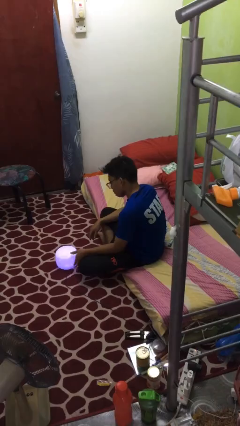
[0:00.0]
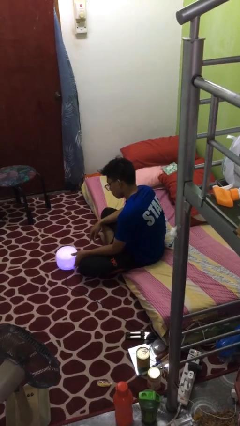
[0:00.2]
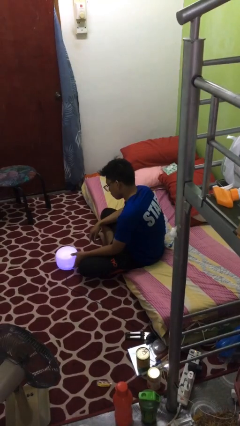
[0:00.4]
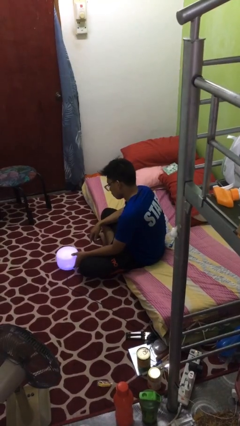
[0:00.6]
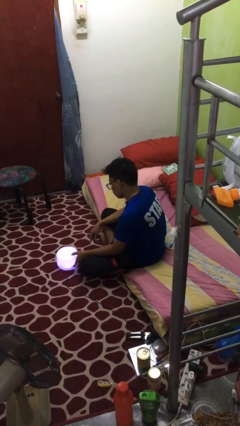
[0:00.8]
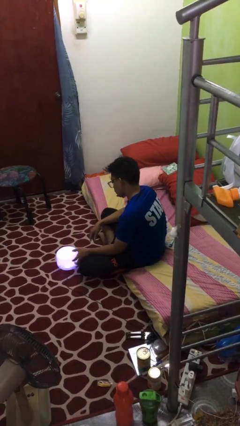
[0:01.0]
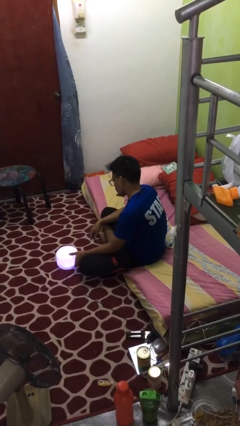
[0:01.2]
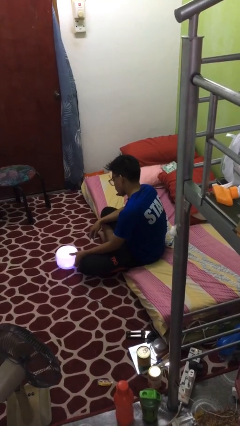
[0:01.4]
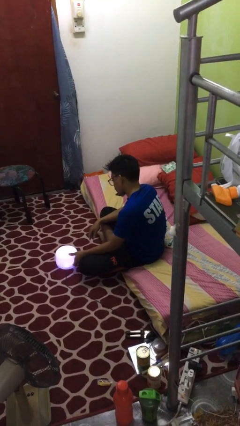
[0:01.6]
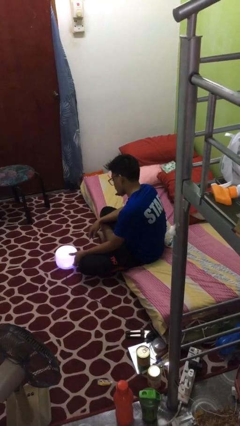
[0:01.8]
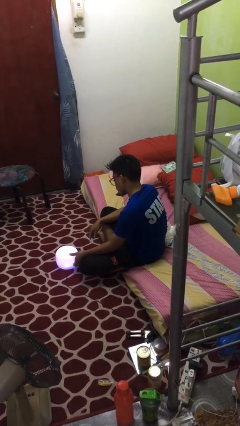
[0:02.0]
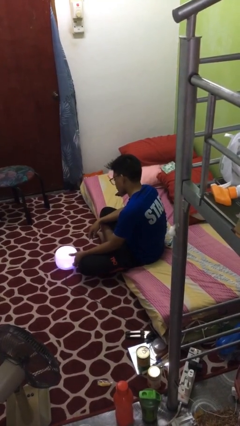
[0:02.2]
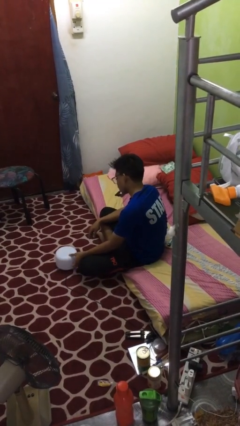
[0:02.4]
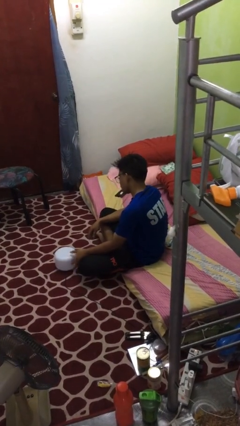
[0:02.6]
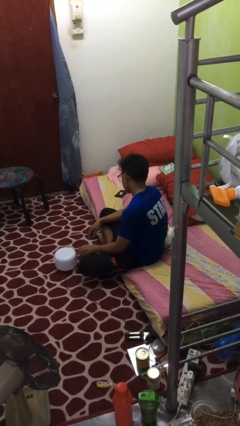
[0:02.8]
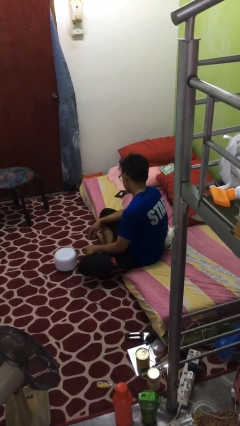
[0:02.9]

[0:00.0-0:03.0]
person turns off lamp

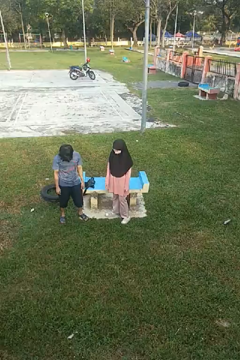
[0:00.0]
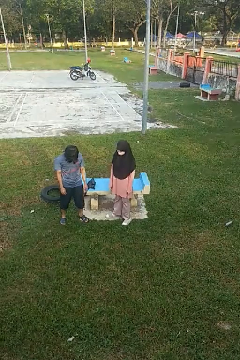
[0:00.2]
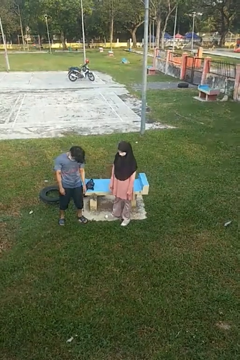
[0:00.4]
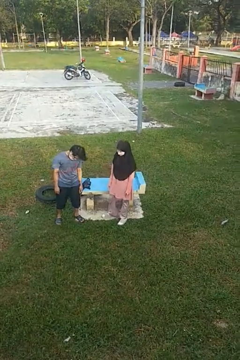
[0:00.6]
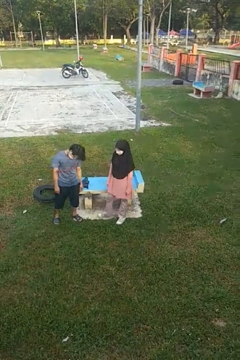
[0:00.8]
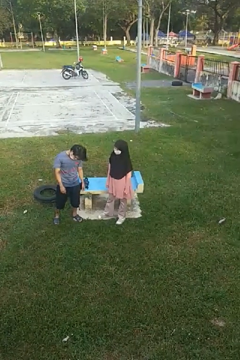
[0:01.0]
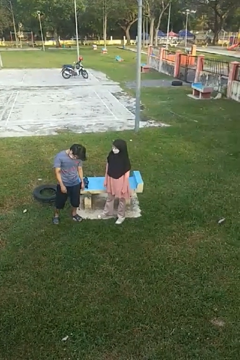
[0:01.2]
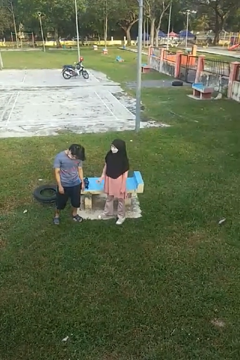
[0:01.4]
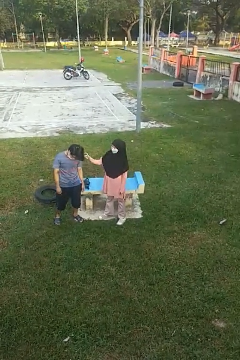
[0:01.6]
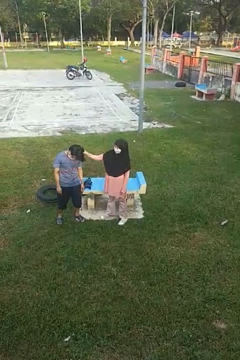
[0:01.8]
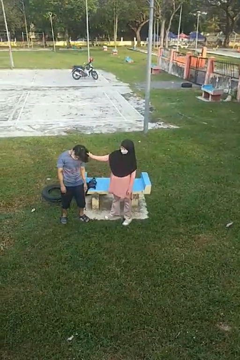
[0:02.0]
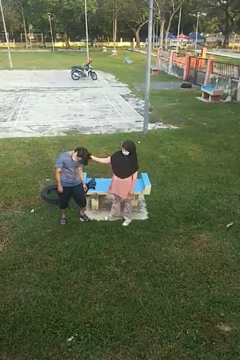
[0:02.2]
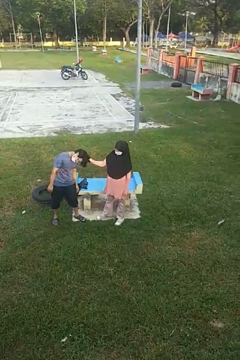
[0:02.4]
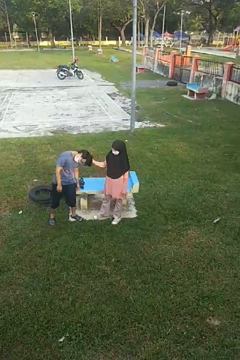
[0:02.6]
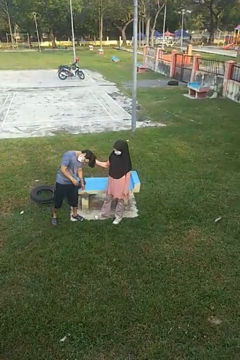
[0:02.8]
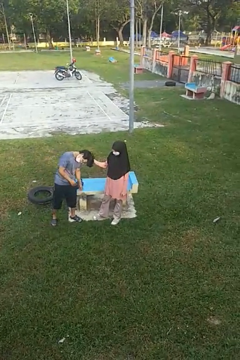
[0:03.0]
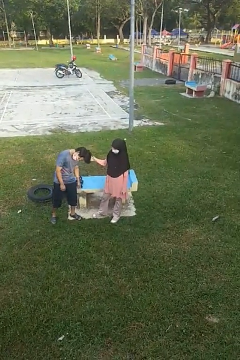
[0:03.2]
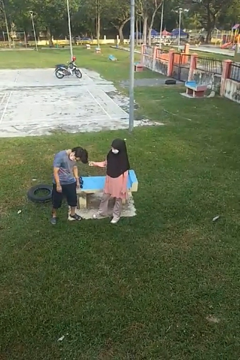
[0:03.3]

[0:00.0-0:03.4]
person grabs person by hair

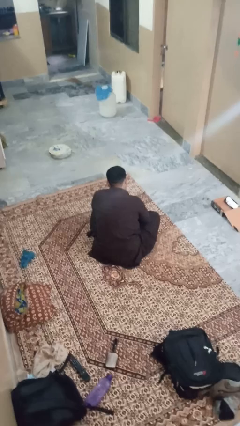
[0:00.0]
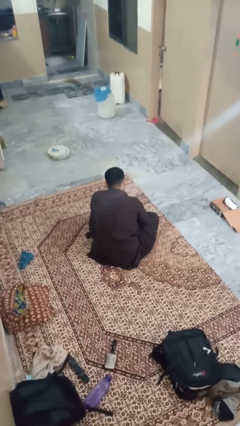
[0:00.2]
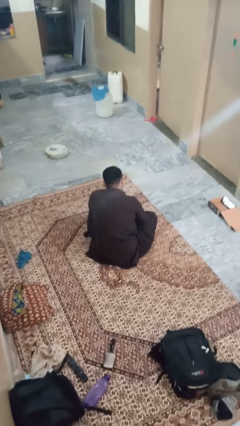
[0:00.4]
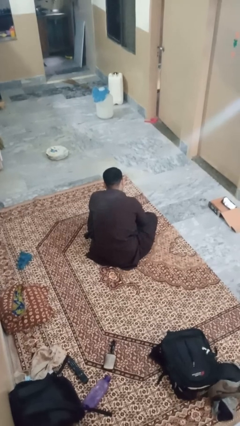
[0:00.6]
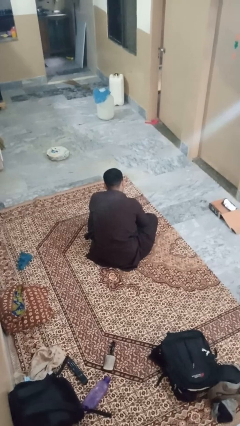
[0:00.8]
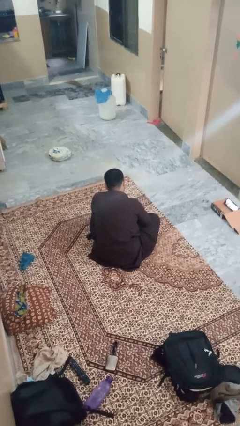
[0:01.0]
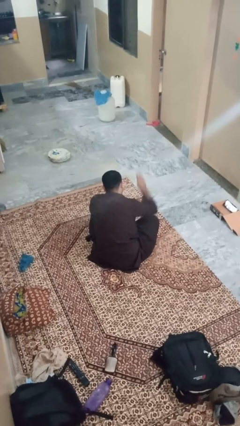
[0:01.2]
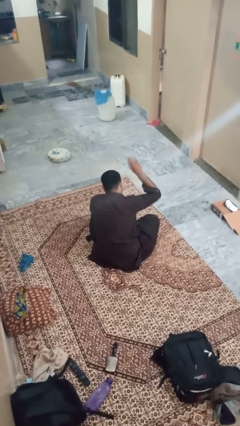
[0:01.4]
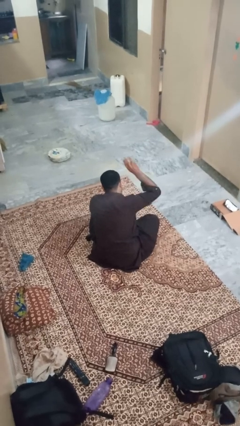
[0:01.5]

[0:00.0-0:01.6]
person gestures number three

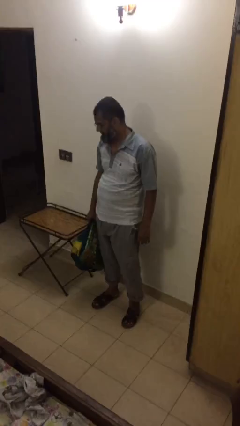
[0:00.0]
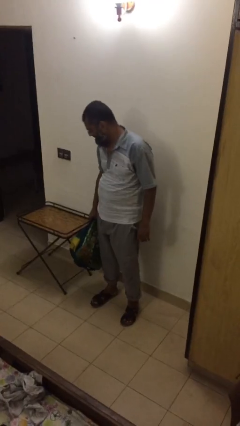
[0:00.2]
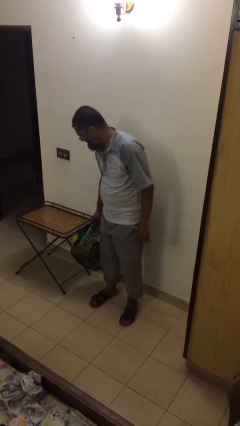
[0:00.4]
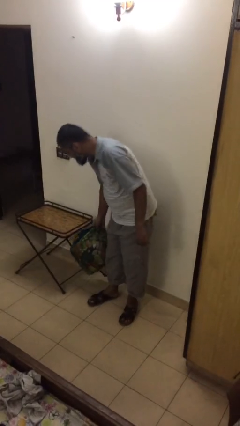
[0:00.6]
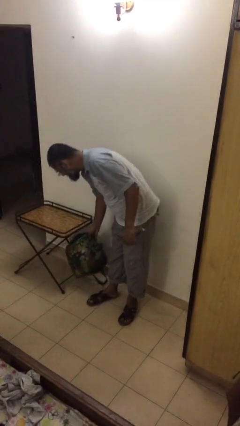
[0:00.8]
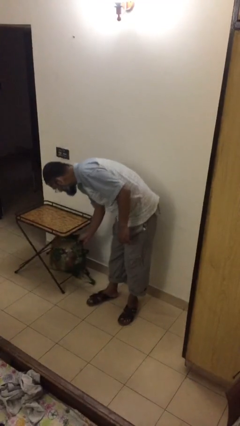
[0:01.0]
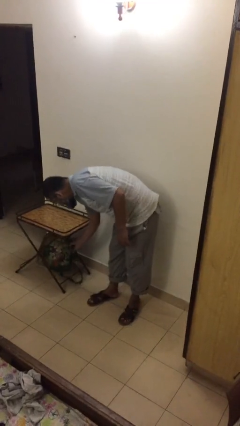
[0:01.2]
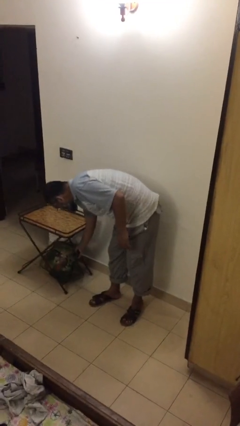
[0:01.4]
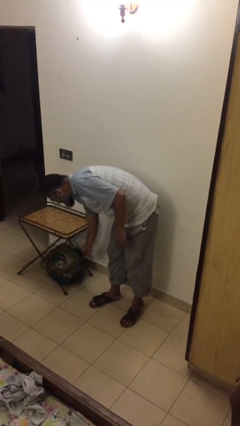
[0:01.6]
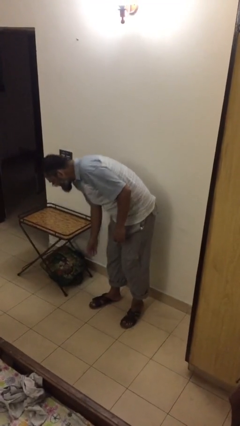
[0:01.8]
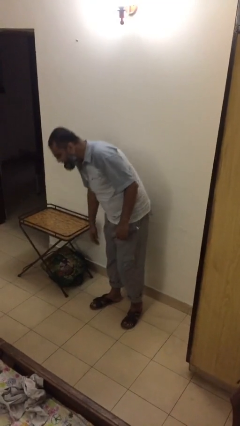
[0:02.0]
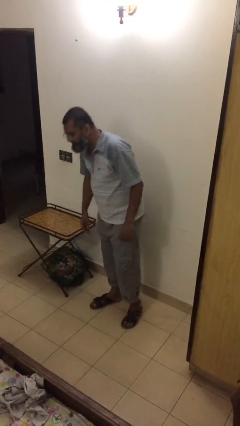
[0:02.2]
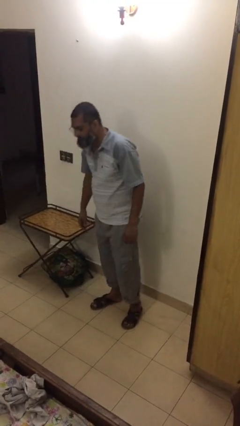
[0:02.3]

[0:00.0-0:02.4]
person puts down object on table

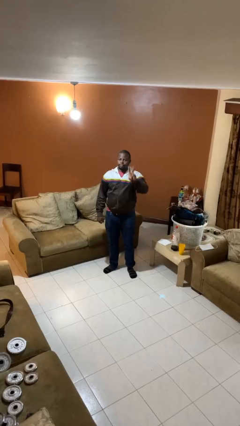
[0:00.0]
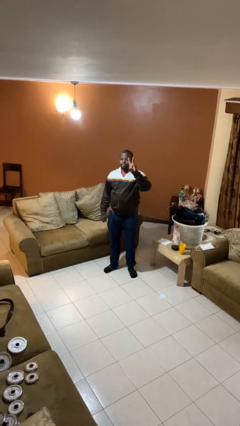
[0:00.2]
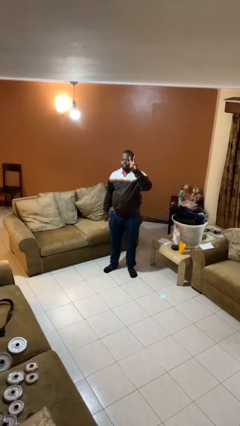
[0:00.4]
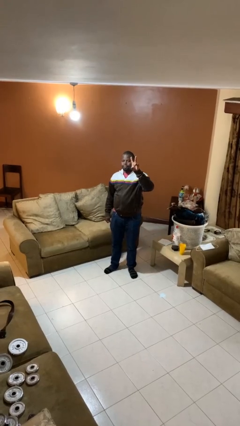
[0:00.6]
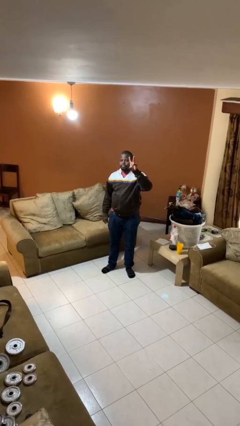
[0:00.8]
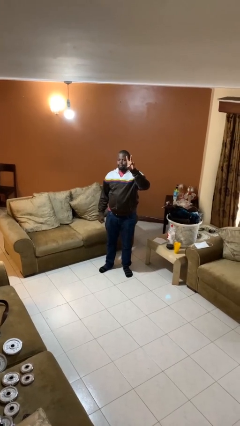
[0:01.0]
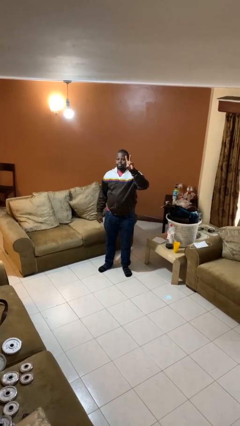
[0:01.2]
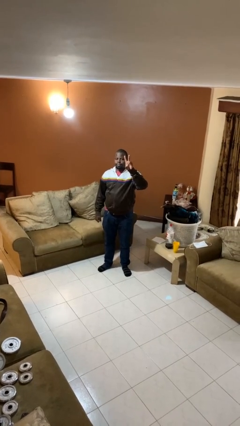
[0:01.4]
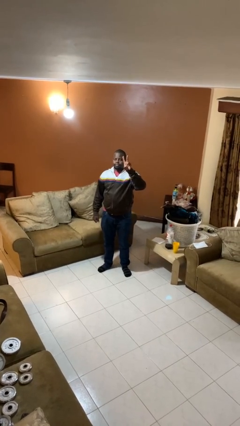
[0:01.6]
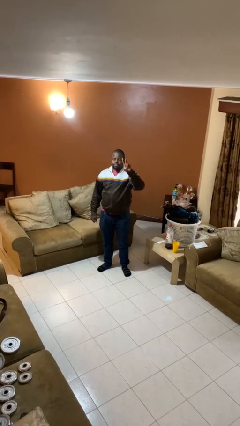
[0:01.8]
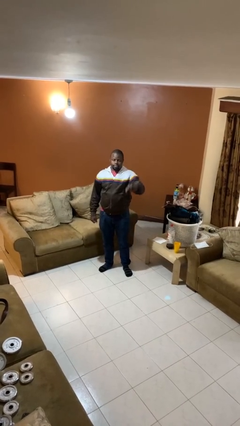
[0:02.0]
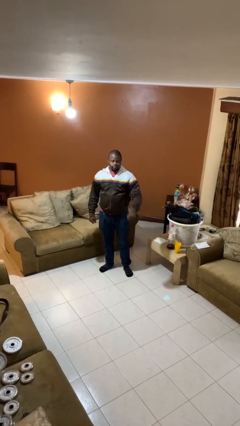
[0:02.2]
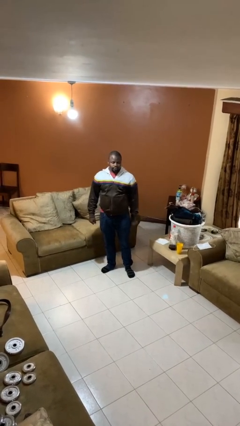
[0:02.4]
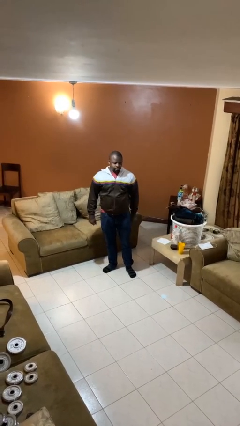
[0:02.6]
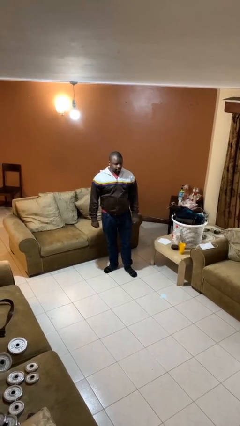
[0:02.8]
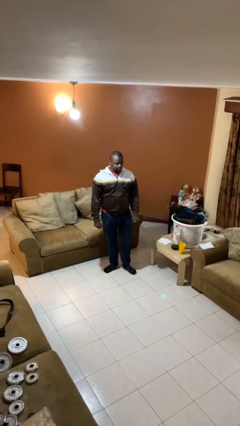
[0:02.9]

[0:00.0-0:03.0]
person gestures peace

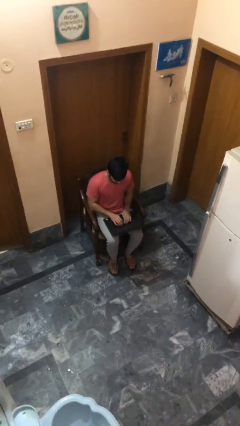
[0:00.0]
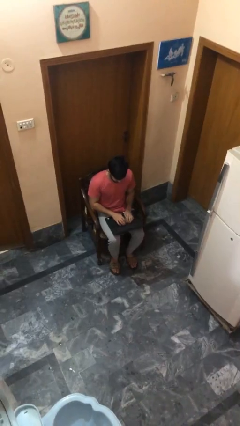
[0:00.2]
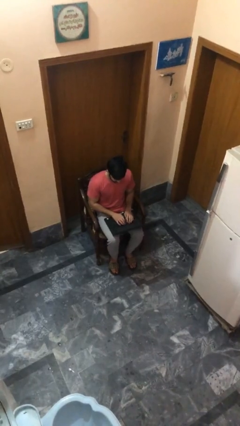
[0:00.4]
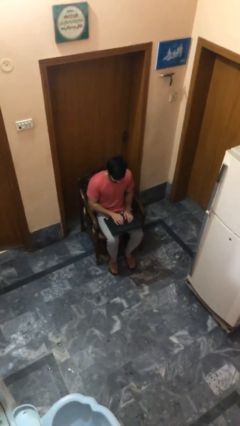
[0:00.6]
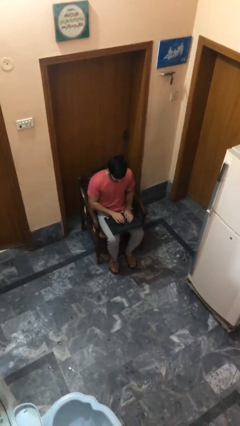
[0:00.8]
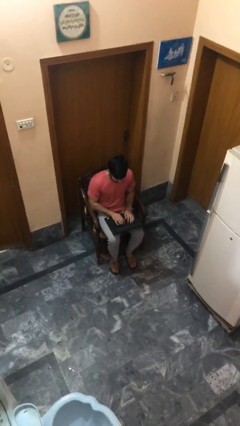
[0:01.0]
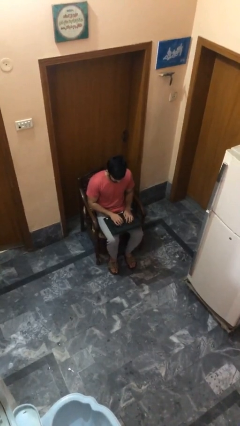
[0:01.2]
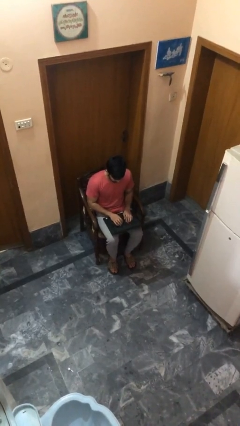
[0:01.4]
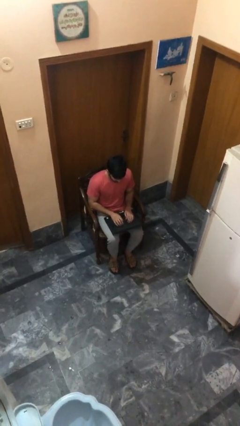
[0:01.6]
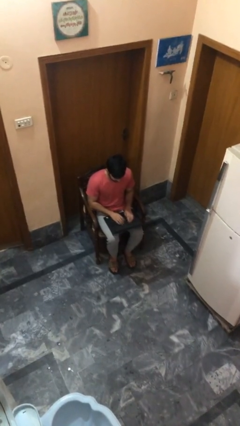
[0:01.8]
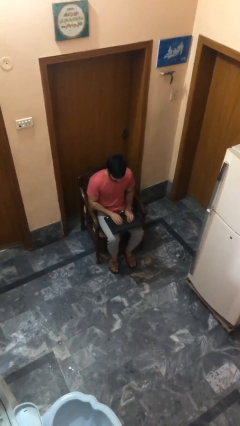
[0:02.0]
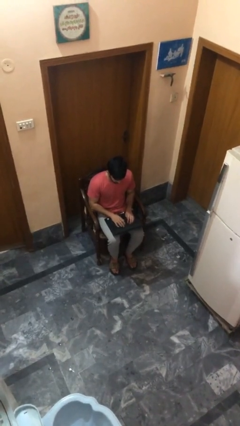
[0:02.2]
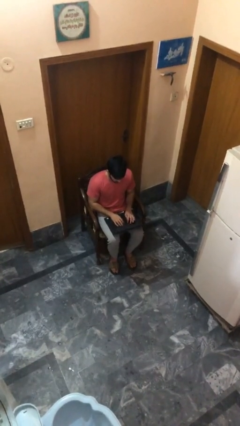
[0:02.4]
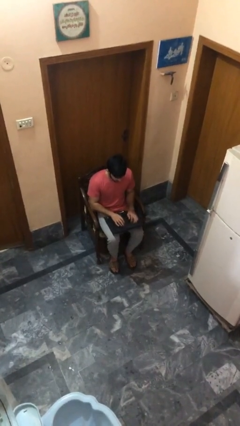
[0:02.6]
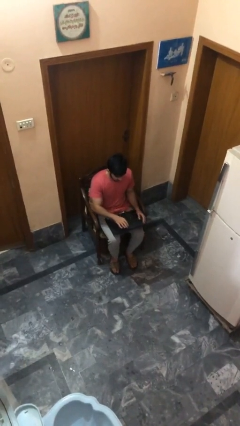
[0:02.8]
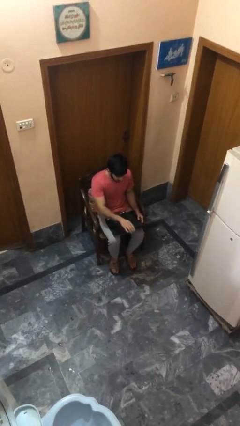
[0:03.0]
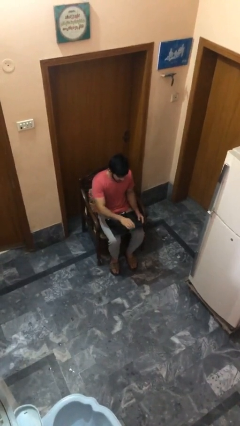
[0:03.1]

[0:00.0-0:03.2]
person interacts with laptop

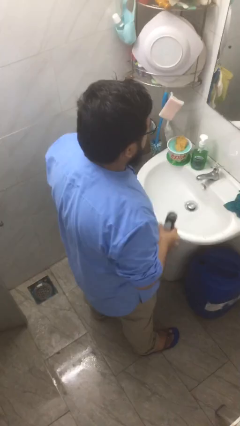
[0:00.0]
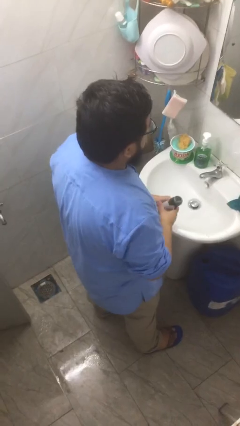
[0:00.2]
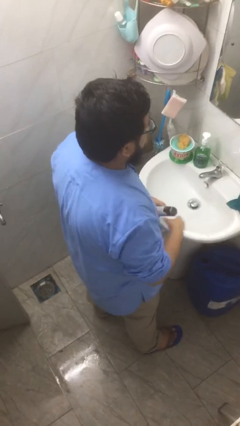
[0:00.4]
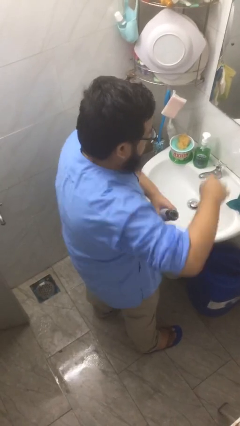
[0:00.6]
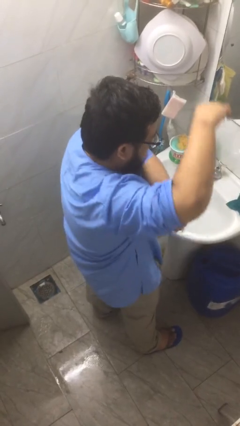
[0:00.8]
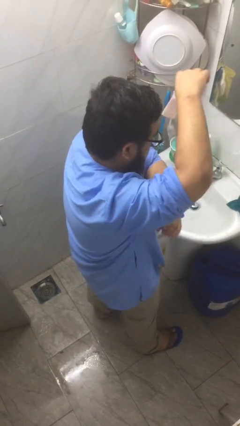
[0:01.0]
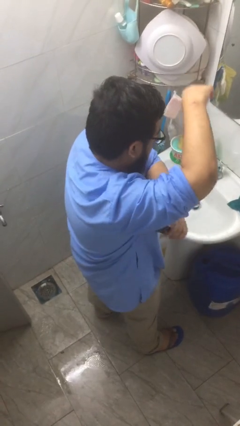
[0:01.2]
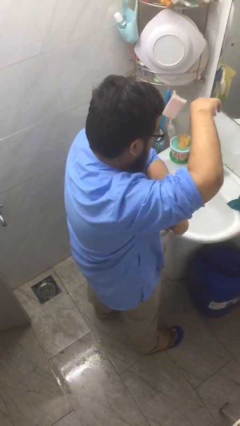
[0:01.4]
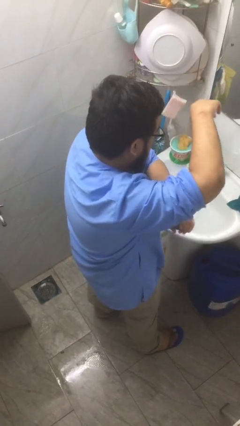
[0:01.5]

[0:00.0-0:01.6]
person applies deodorant
